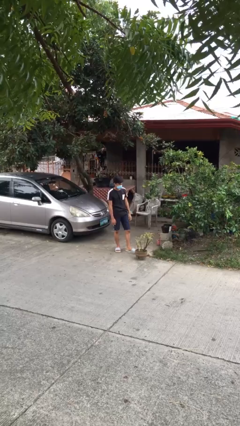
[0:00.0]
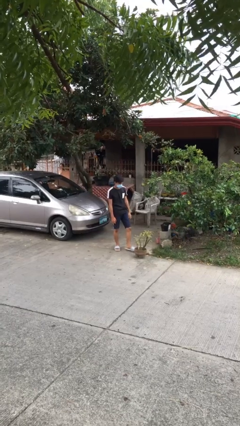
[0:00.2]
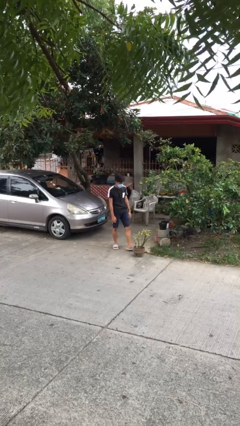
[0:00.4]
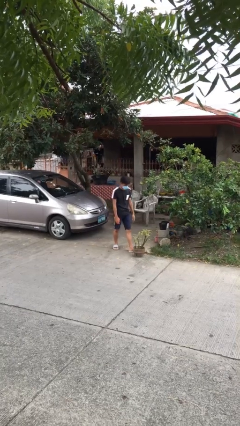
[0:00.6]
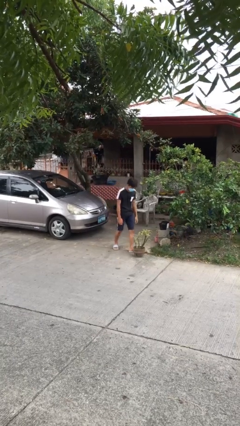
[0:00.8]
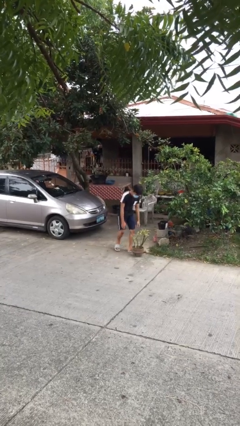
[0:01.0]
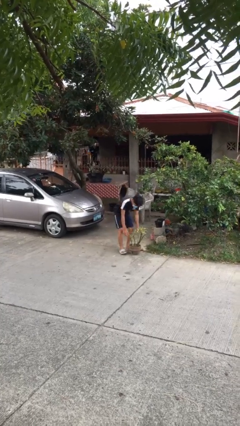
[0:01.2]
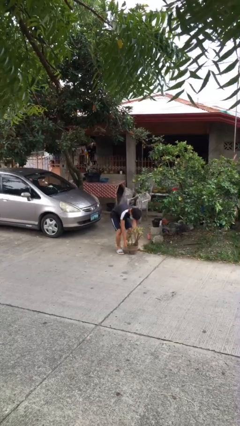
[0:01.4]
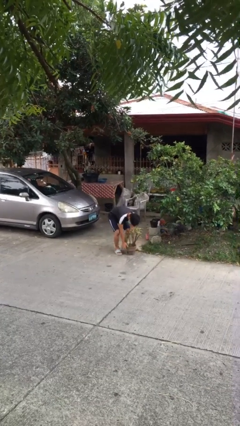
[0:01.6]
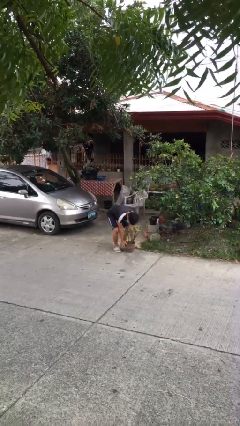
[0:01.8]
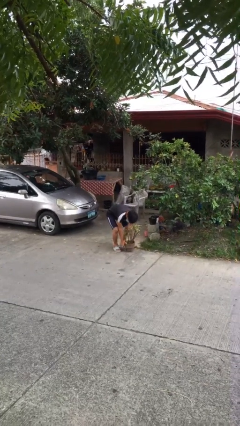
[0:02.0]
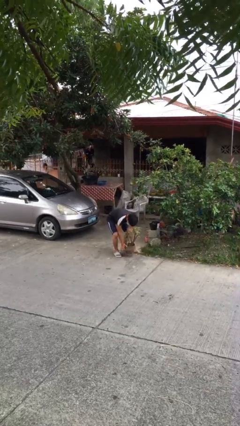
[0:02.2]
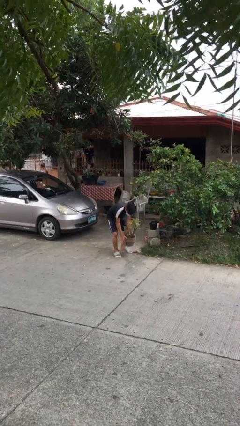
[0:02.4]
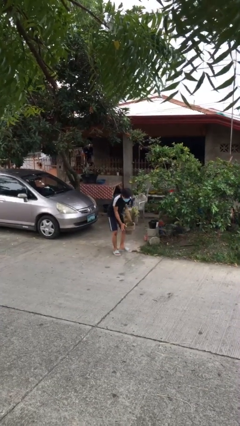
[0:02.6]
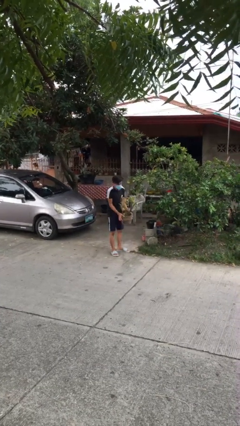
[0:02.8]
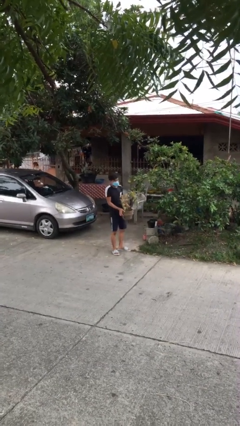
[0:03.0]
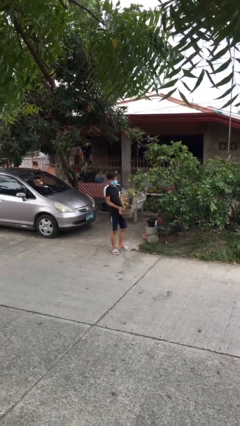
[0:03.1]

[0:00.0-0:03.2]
person picks up object from floor

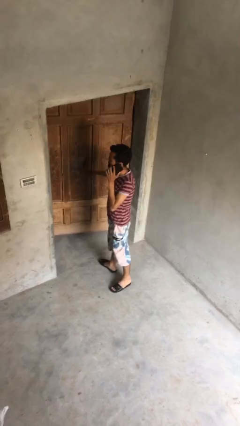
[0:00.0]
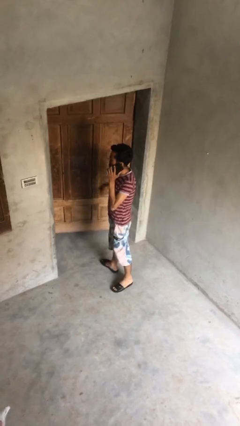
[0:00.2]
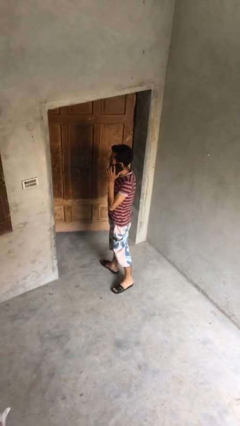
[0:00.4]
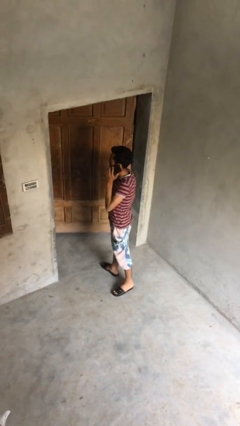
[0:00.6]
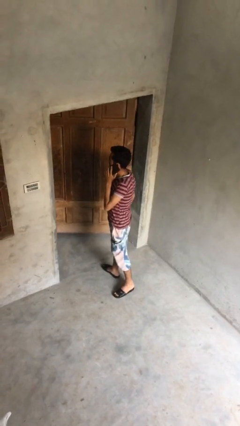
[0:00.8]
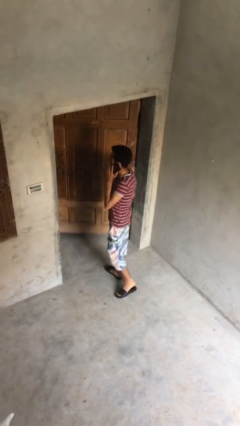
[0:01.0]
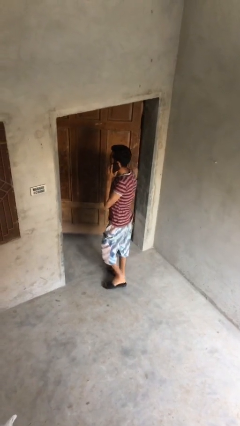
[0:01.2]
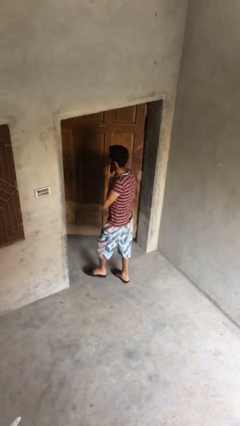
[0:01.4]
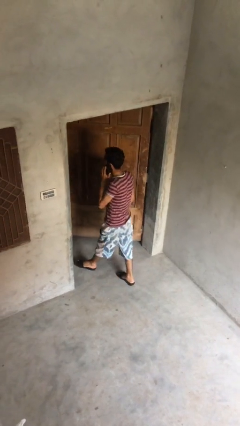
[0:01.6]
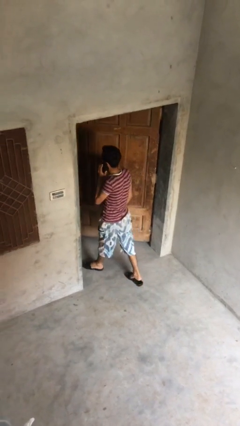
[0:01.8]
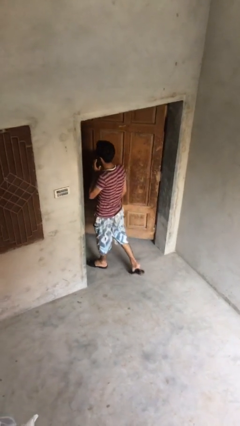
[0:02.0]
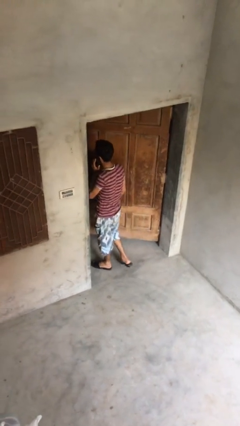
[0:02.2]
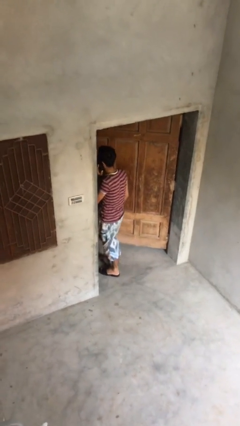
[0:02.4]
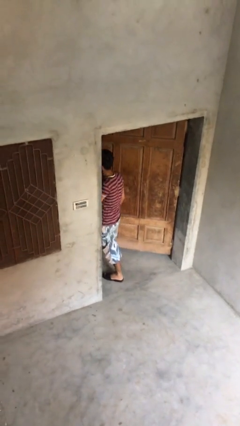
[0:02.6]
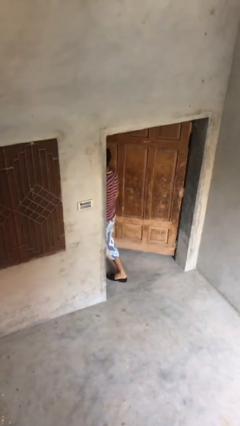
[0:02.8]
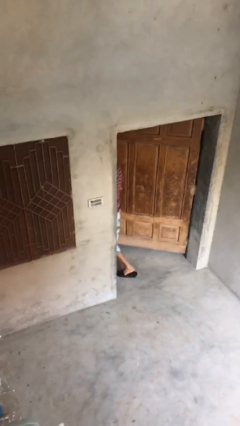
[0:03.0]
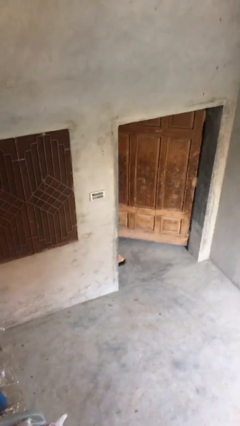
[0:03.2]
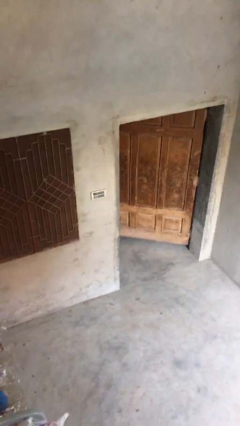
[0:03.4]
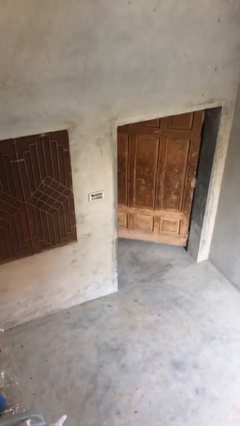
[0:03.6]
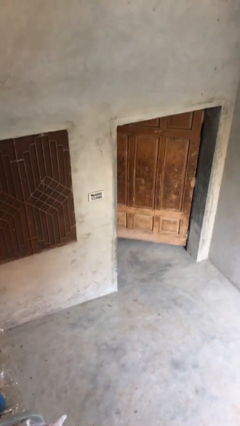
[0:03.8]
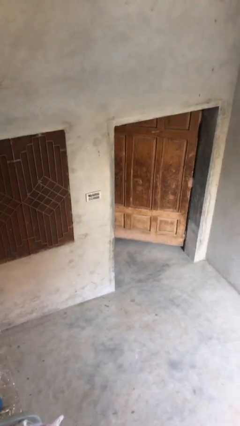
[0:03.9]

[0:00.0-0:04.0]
person exits scene through structure

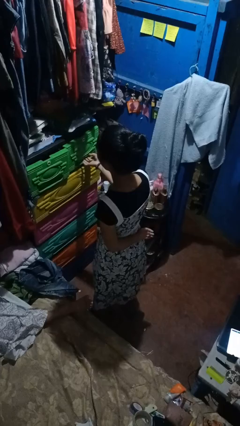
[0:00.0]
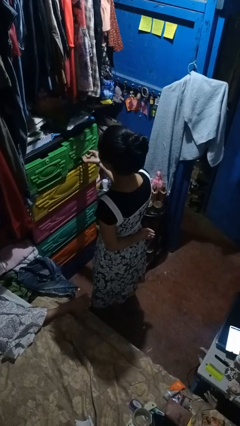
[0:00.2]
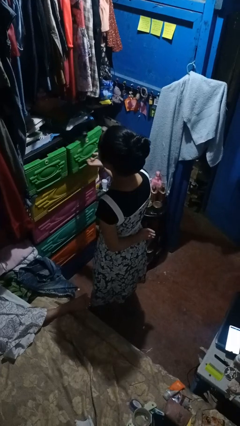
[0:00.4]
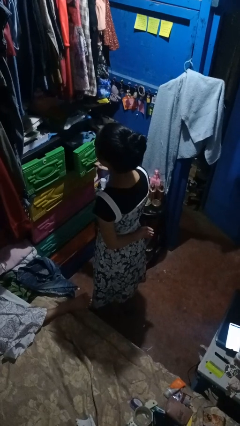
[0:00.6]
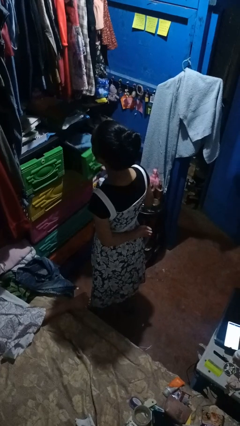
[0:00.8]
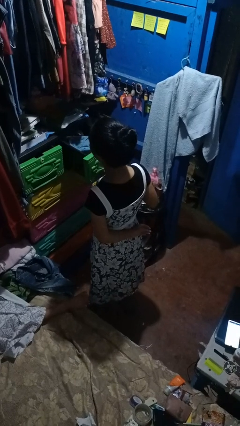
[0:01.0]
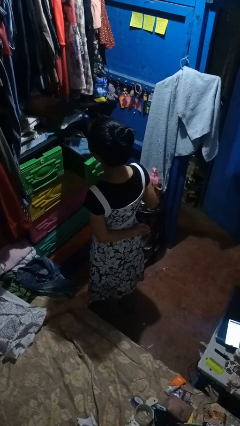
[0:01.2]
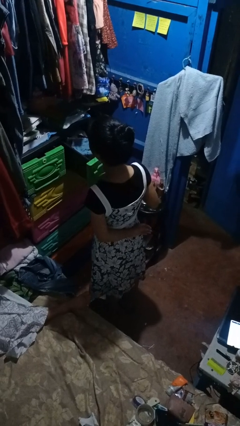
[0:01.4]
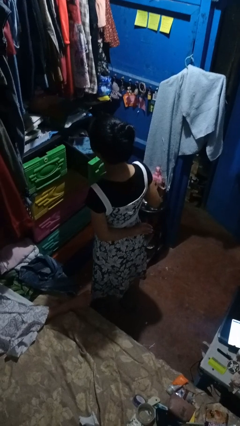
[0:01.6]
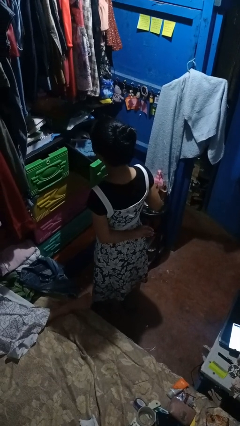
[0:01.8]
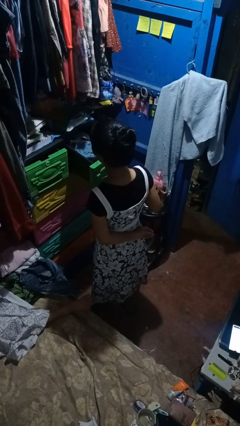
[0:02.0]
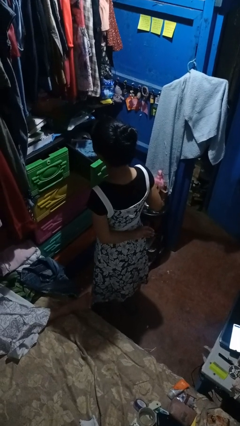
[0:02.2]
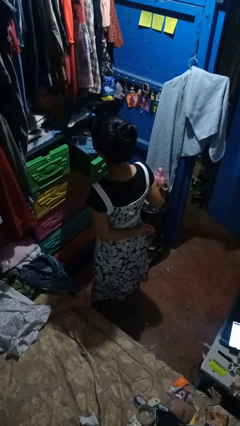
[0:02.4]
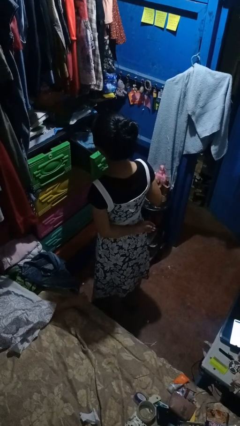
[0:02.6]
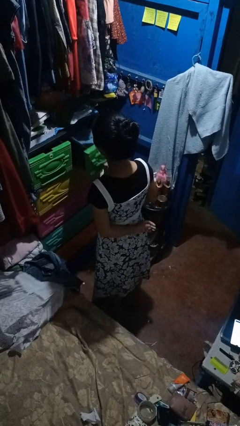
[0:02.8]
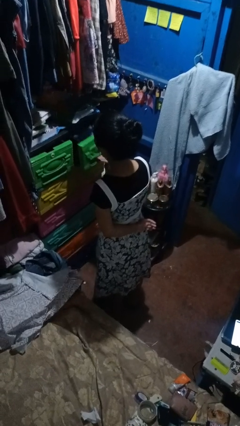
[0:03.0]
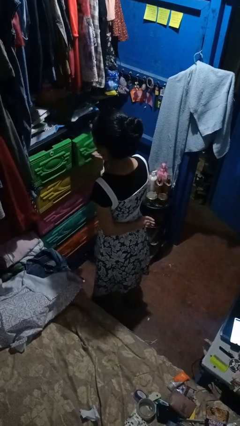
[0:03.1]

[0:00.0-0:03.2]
person opens dresser drawer

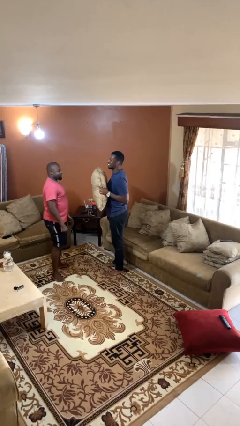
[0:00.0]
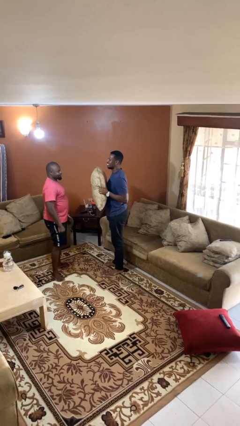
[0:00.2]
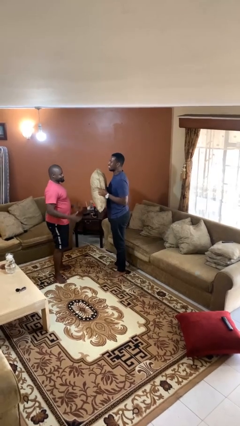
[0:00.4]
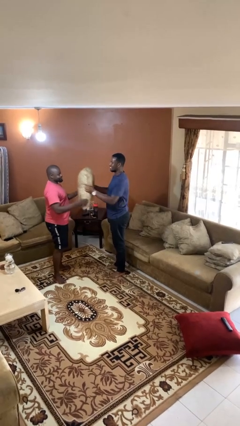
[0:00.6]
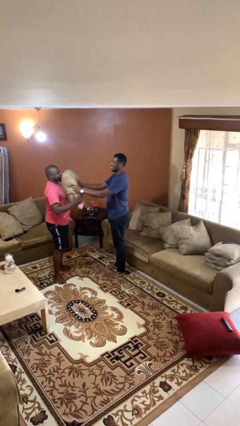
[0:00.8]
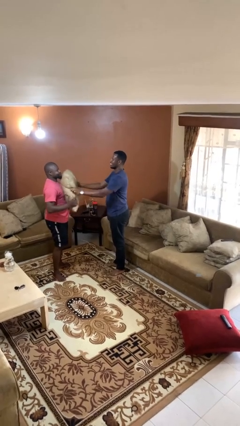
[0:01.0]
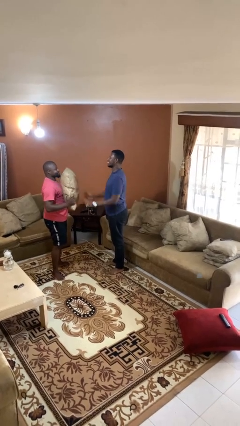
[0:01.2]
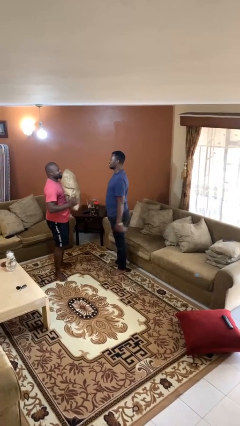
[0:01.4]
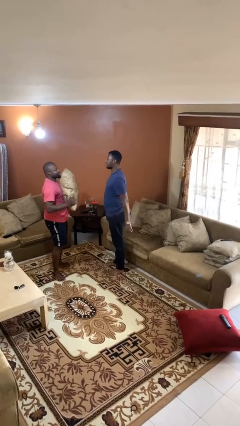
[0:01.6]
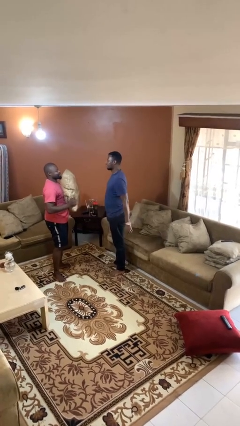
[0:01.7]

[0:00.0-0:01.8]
person transfers object to person

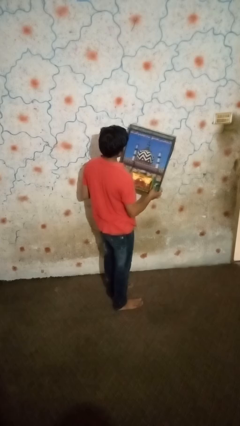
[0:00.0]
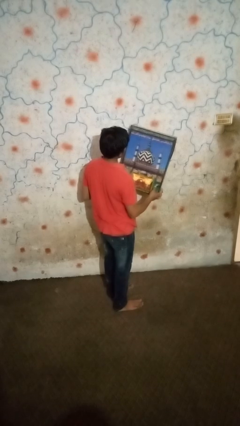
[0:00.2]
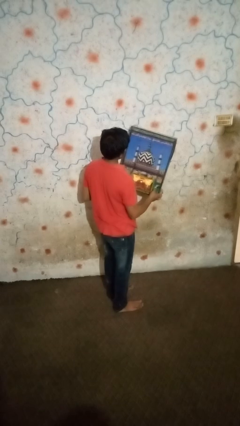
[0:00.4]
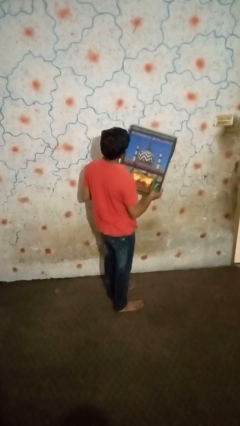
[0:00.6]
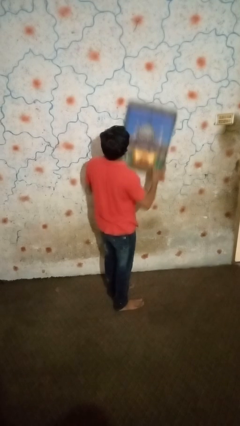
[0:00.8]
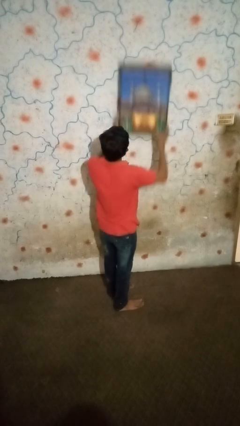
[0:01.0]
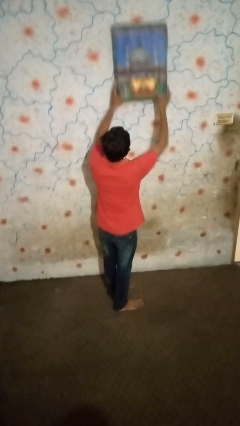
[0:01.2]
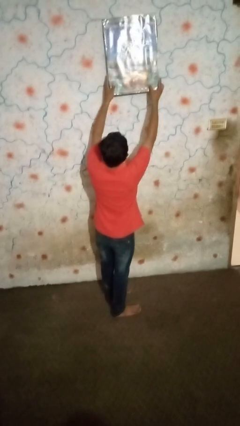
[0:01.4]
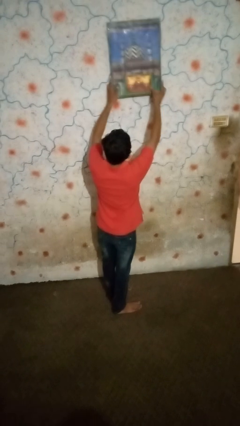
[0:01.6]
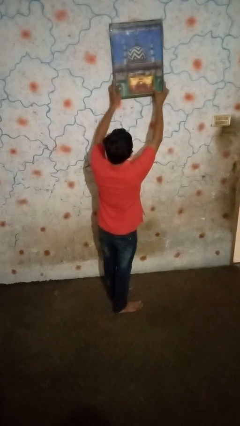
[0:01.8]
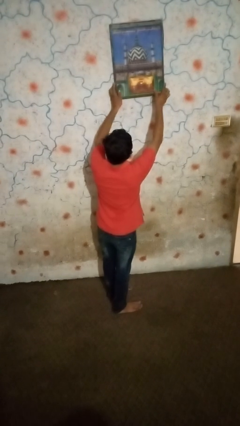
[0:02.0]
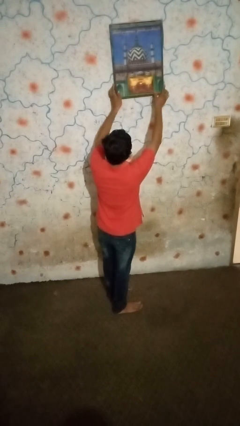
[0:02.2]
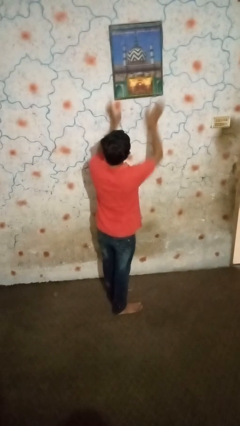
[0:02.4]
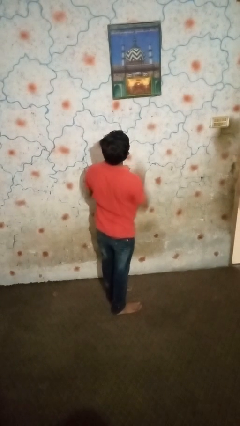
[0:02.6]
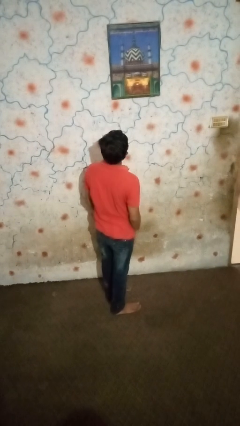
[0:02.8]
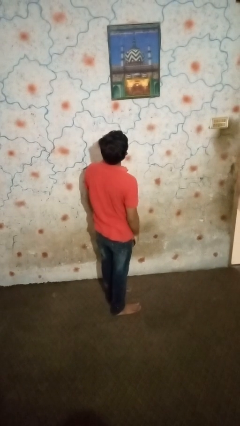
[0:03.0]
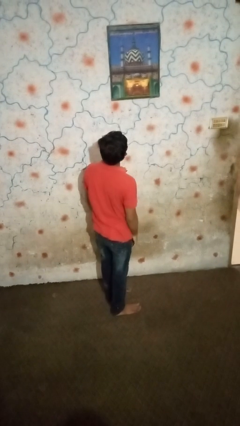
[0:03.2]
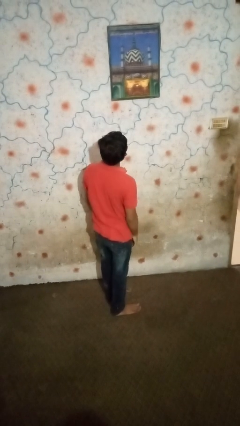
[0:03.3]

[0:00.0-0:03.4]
person puts up picture frame

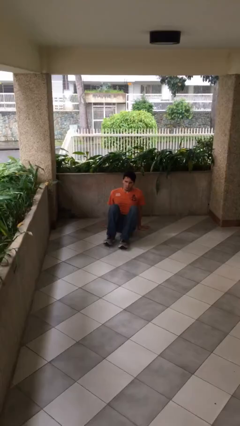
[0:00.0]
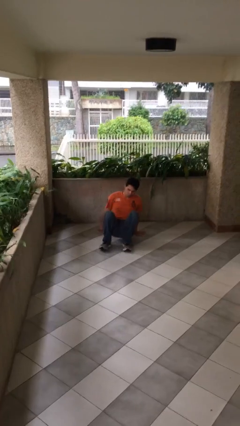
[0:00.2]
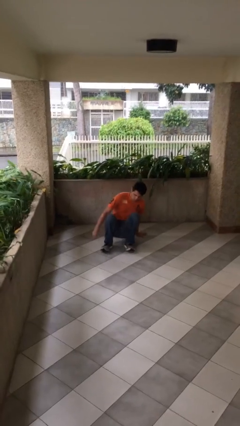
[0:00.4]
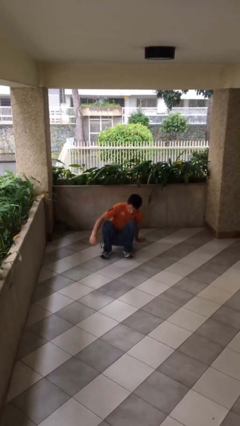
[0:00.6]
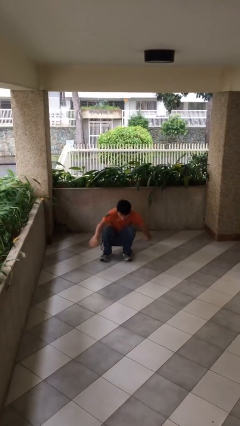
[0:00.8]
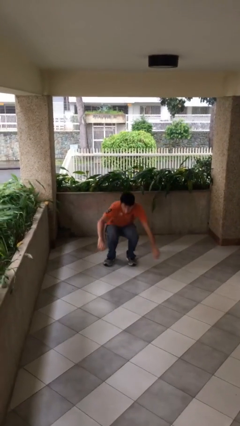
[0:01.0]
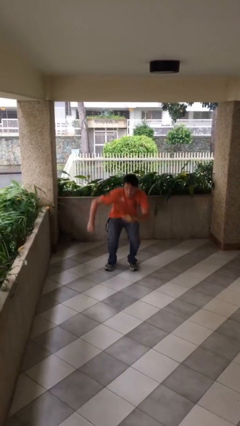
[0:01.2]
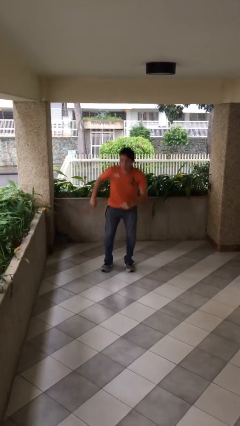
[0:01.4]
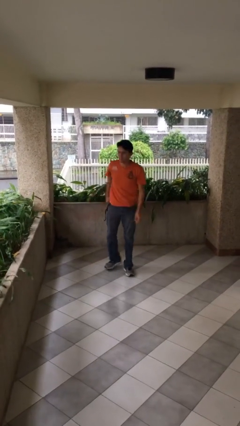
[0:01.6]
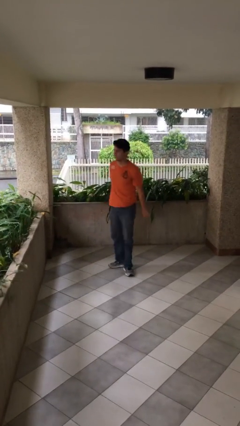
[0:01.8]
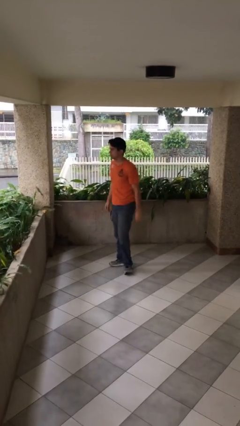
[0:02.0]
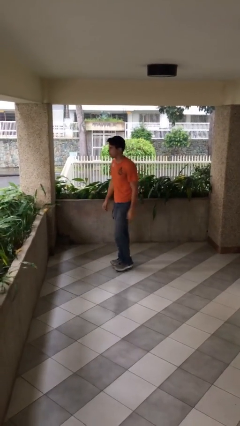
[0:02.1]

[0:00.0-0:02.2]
person stands up
